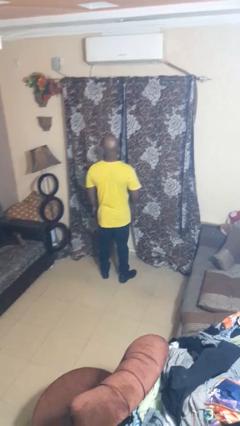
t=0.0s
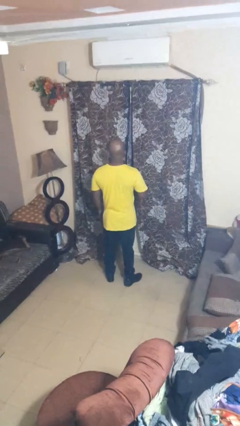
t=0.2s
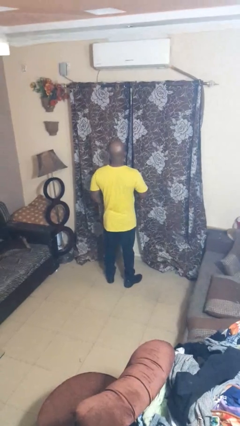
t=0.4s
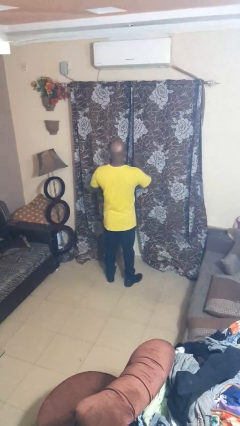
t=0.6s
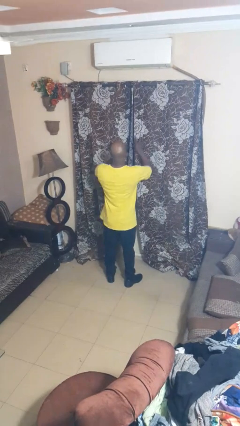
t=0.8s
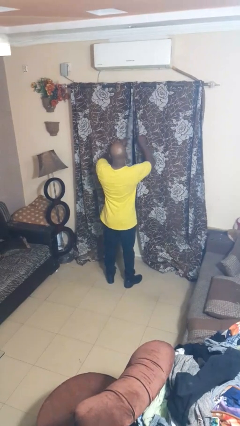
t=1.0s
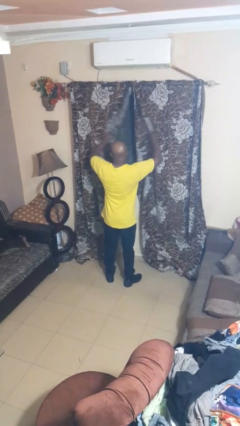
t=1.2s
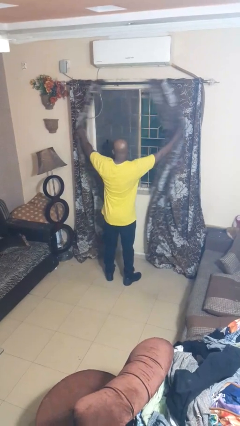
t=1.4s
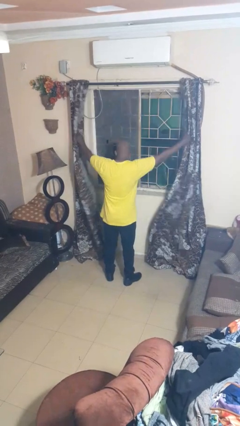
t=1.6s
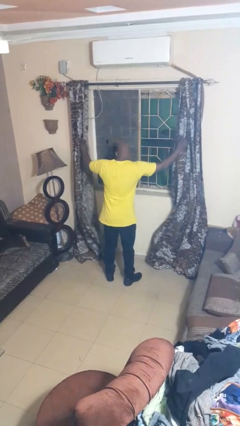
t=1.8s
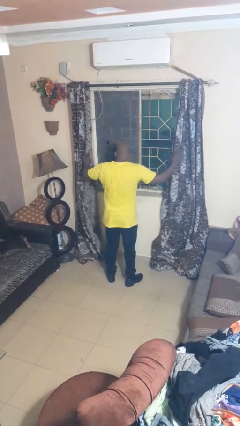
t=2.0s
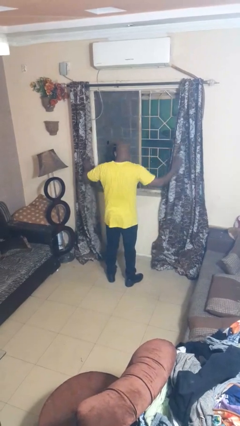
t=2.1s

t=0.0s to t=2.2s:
person opens curtains

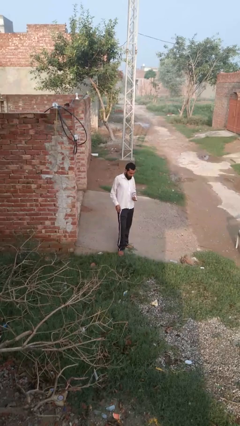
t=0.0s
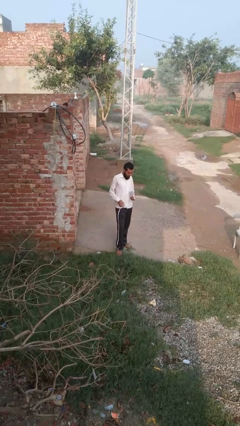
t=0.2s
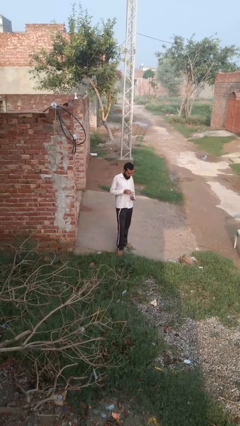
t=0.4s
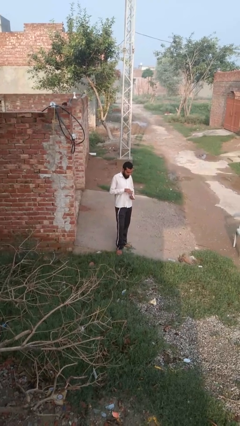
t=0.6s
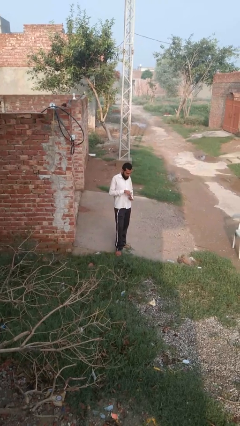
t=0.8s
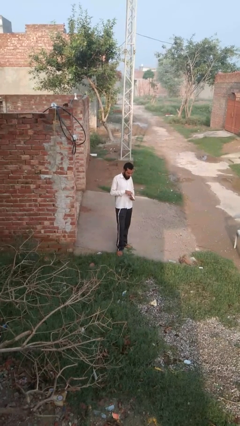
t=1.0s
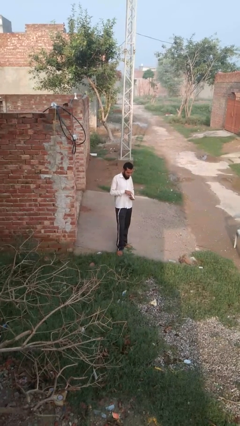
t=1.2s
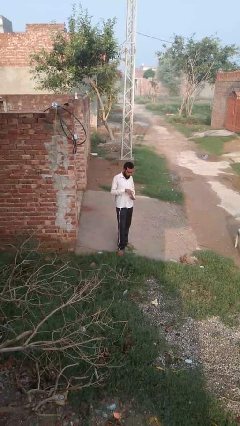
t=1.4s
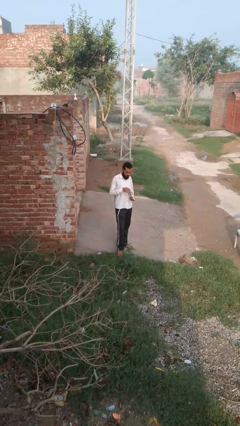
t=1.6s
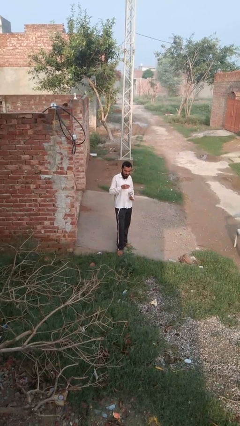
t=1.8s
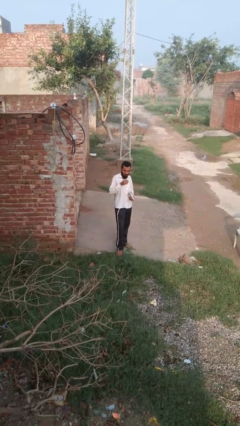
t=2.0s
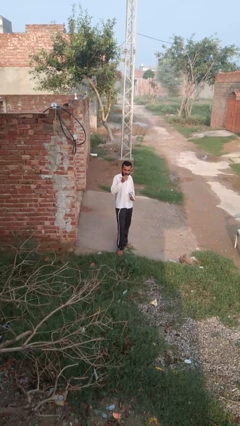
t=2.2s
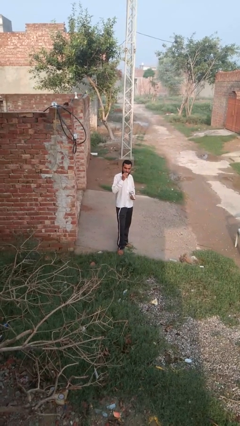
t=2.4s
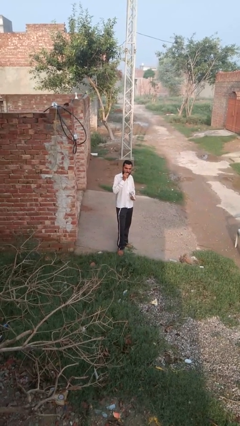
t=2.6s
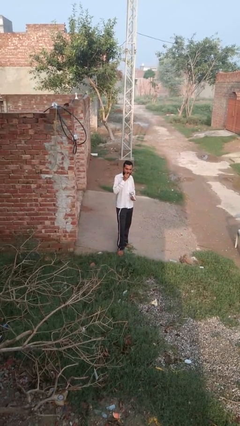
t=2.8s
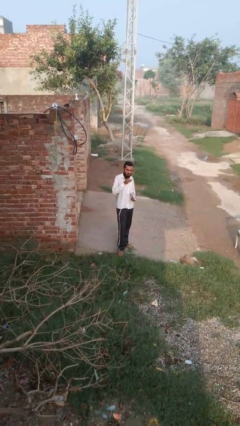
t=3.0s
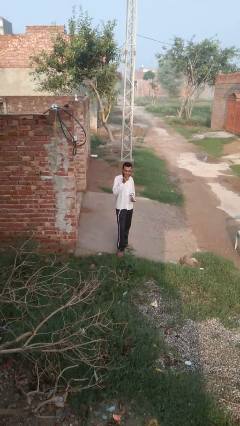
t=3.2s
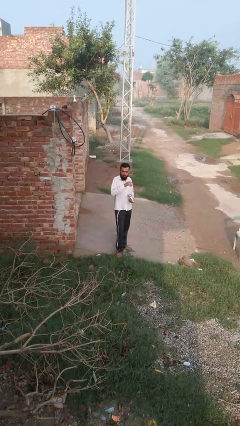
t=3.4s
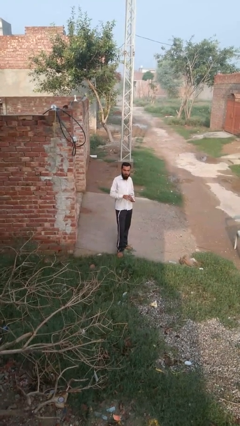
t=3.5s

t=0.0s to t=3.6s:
person eats snack from bag

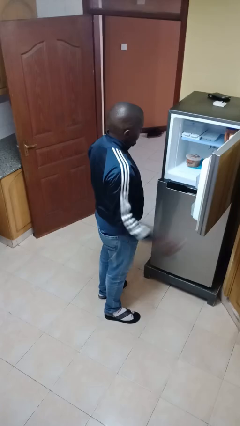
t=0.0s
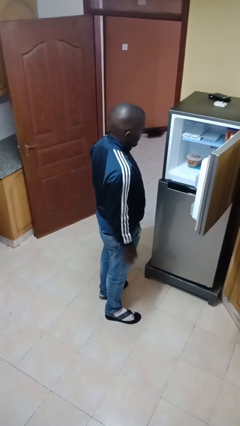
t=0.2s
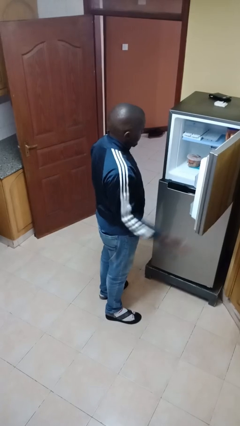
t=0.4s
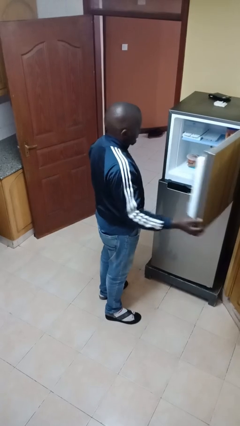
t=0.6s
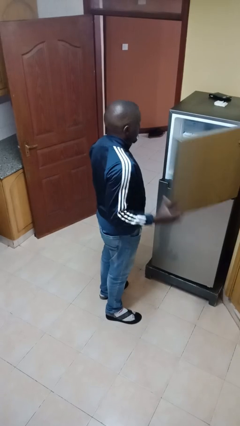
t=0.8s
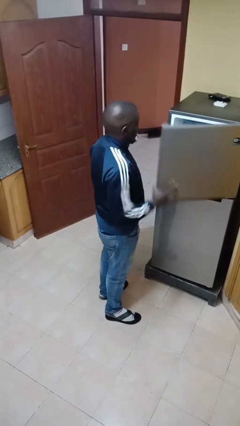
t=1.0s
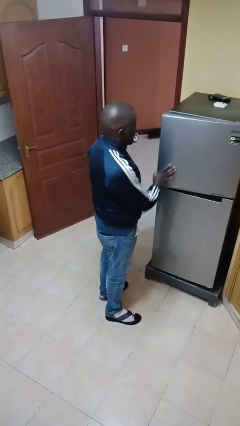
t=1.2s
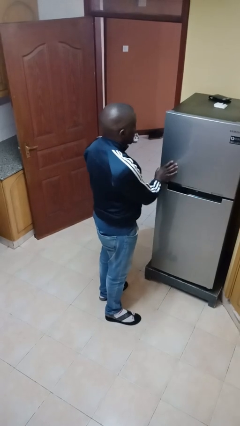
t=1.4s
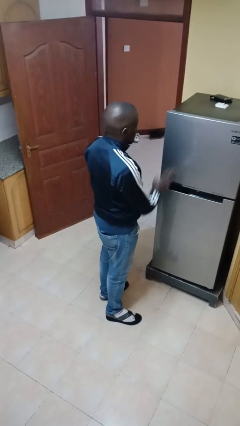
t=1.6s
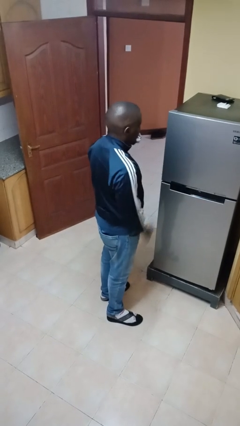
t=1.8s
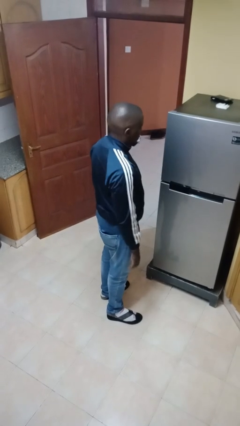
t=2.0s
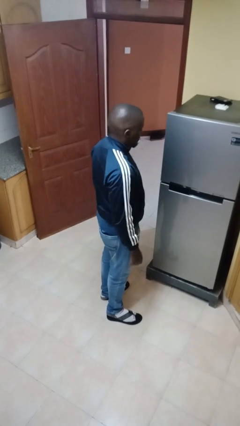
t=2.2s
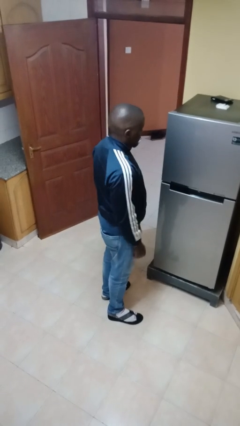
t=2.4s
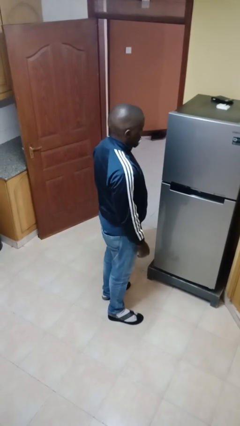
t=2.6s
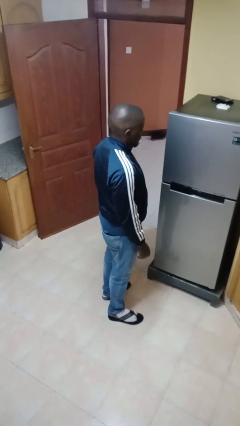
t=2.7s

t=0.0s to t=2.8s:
person closes refrigerator

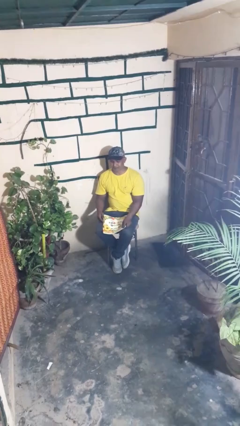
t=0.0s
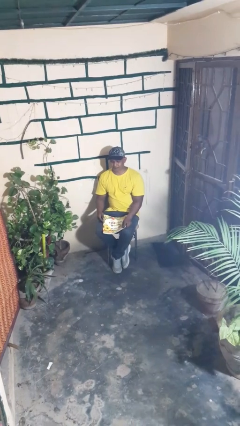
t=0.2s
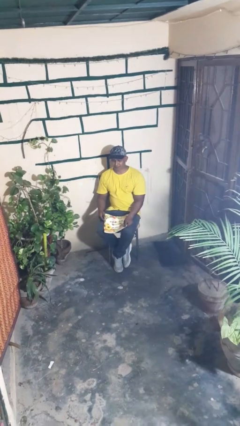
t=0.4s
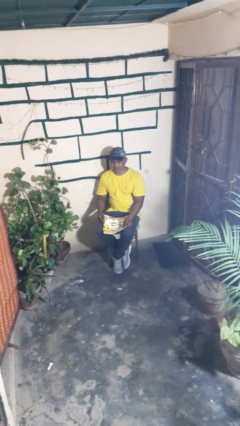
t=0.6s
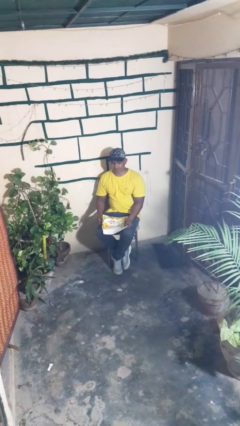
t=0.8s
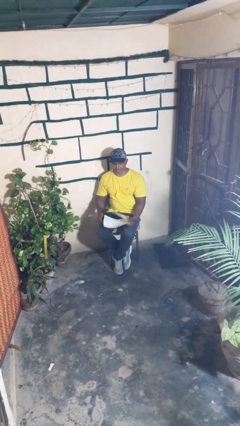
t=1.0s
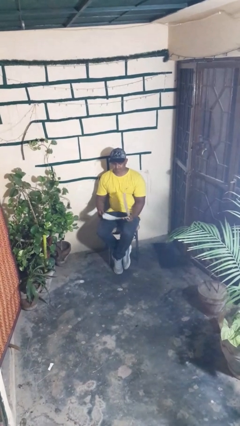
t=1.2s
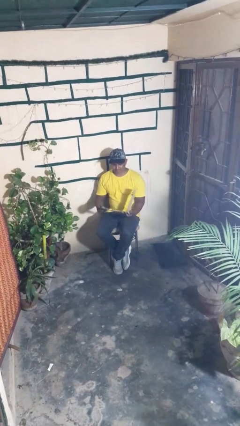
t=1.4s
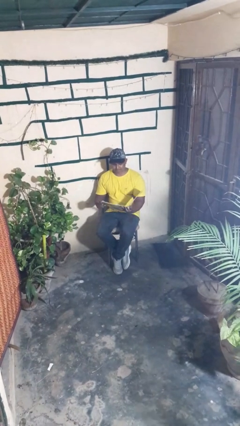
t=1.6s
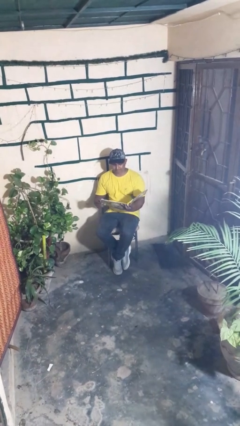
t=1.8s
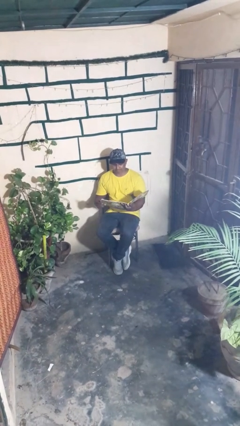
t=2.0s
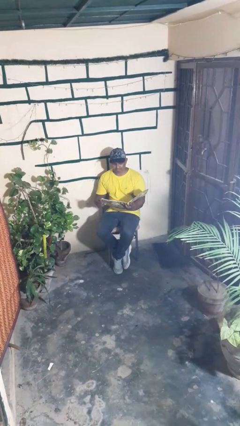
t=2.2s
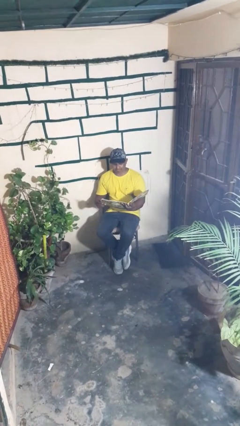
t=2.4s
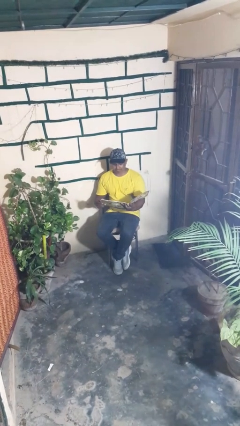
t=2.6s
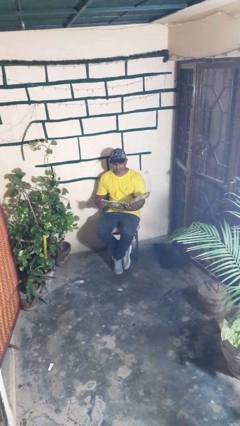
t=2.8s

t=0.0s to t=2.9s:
person reads magazine

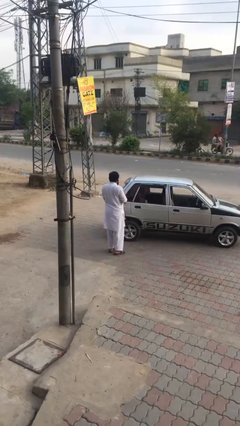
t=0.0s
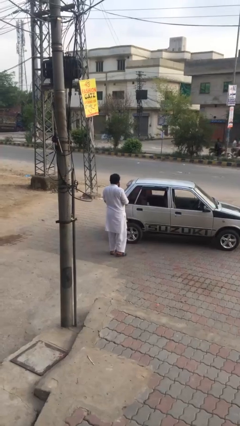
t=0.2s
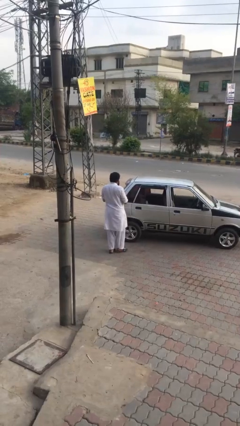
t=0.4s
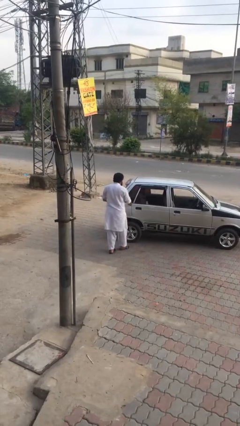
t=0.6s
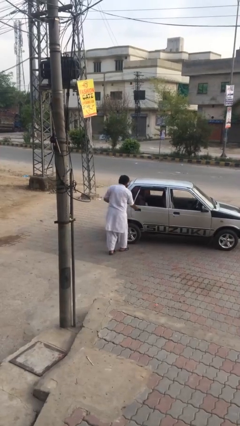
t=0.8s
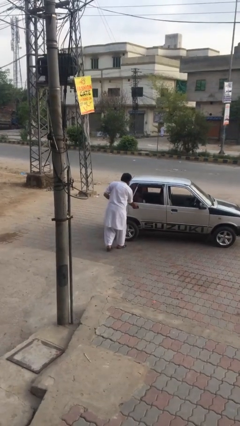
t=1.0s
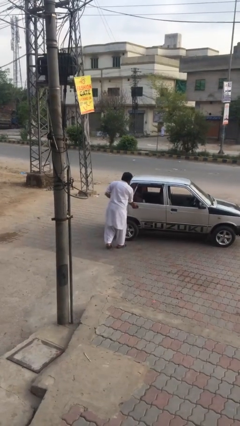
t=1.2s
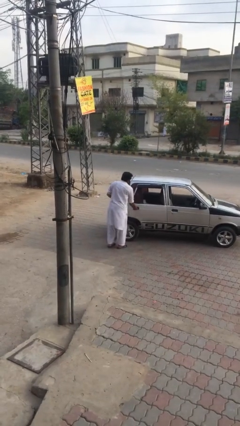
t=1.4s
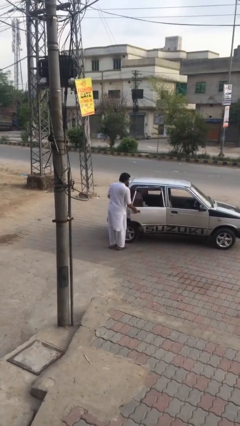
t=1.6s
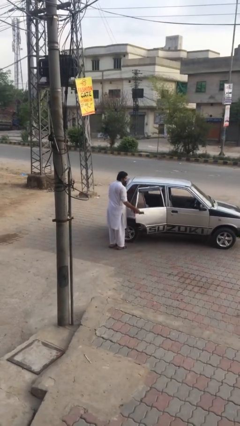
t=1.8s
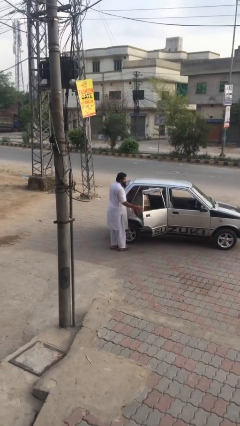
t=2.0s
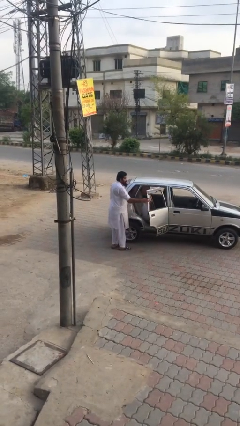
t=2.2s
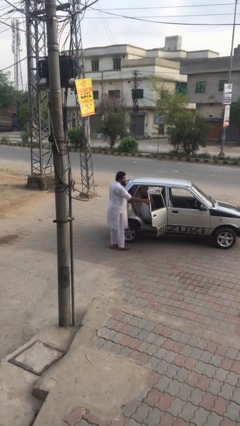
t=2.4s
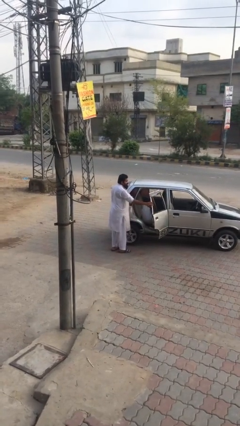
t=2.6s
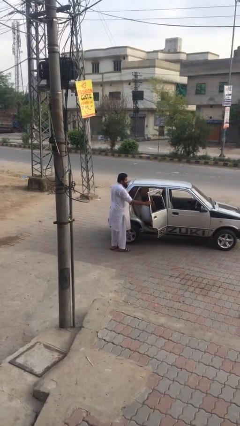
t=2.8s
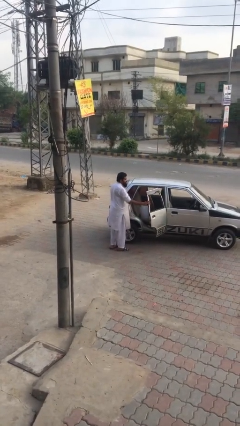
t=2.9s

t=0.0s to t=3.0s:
person opens car door

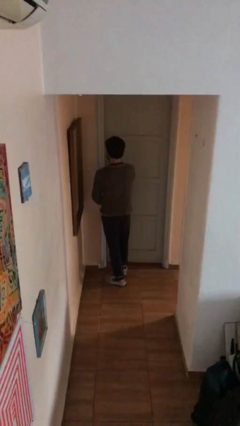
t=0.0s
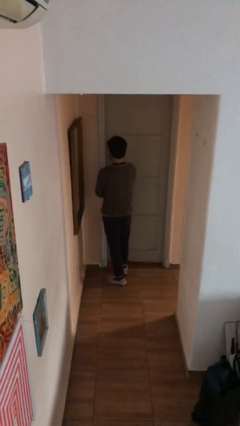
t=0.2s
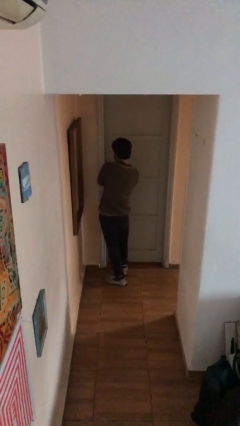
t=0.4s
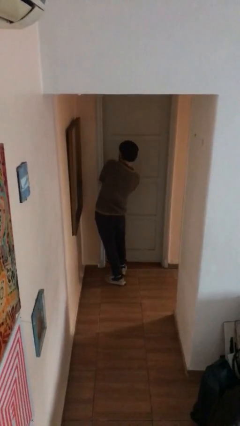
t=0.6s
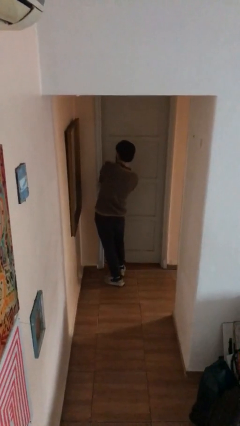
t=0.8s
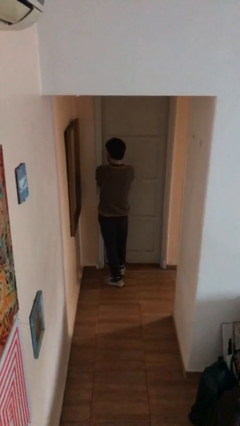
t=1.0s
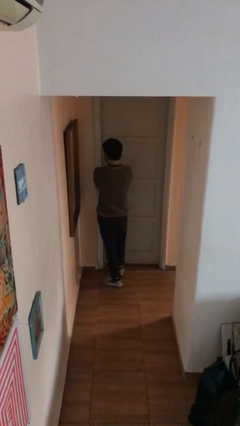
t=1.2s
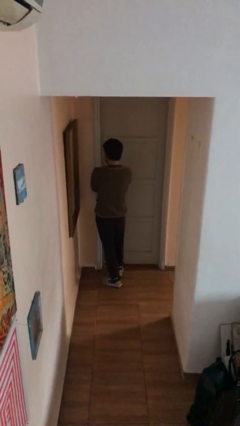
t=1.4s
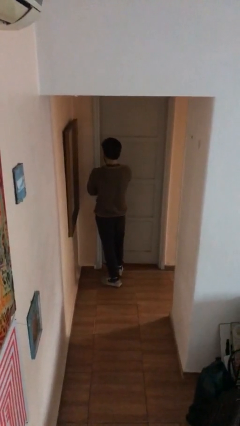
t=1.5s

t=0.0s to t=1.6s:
person unlocks door with keys

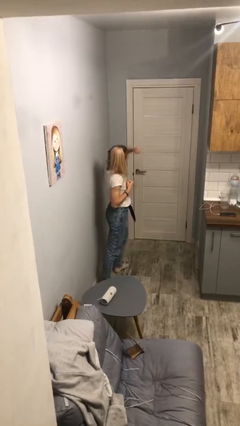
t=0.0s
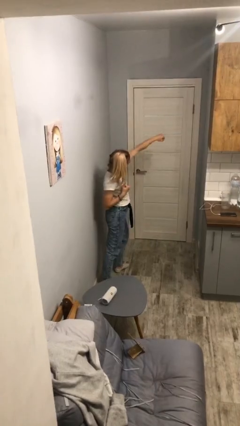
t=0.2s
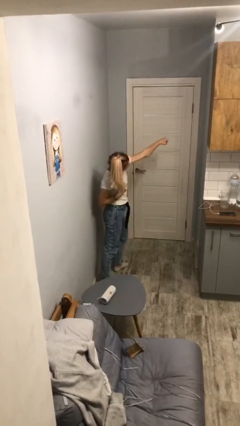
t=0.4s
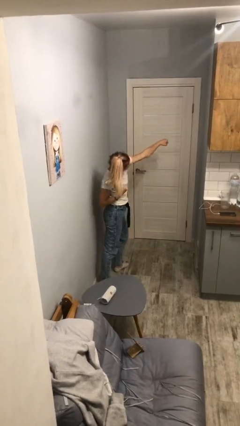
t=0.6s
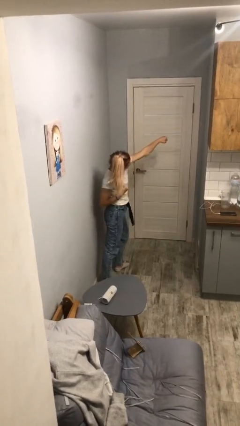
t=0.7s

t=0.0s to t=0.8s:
person karate chop

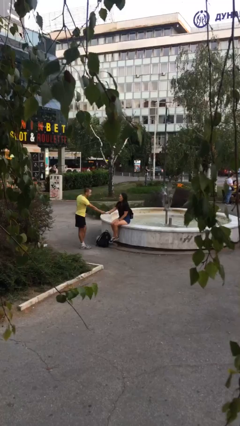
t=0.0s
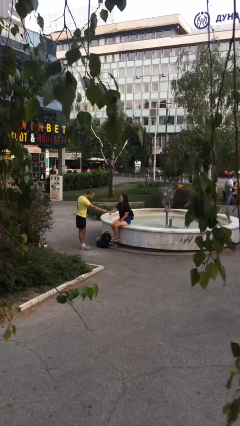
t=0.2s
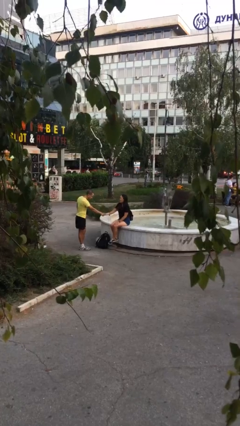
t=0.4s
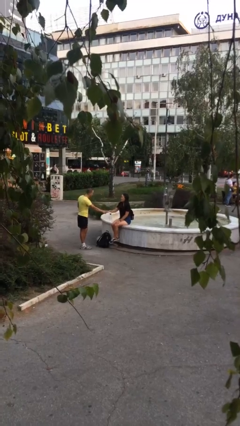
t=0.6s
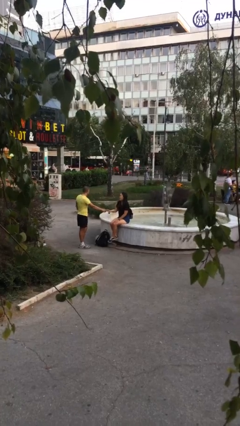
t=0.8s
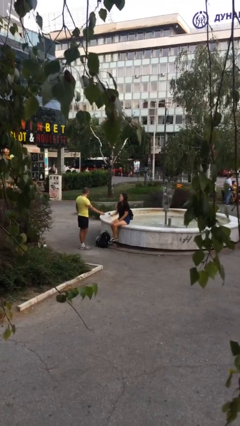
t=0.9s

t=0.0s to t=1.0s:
person shakes hand
